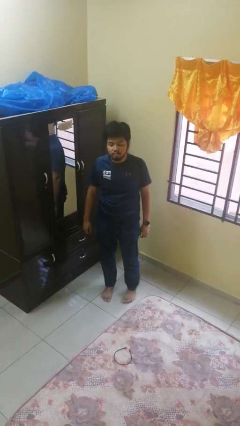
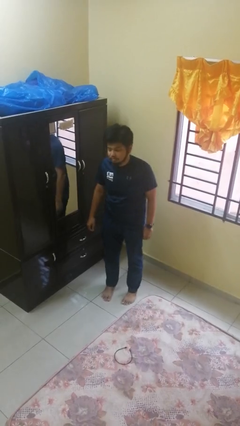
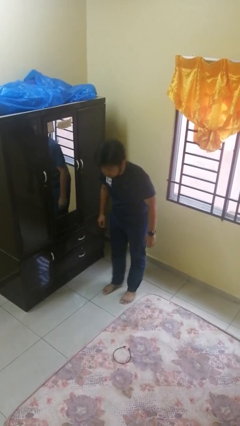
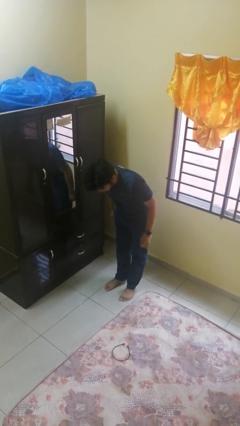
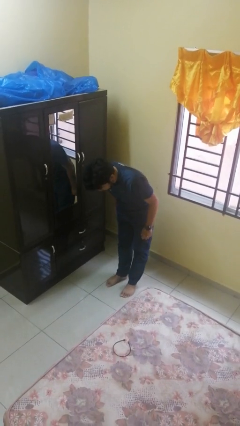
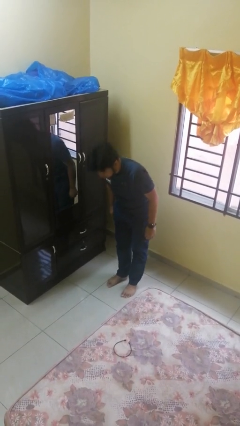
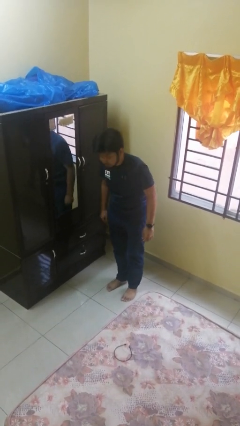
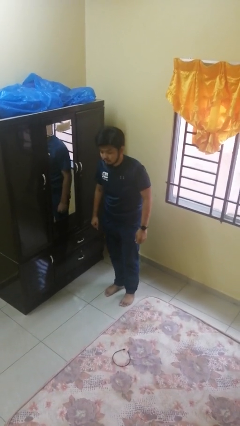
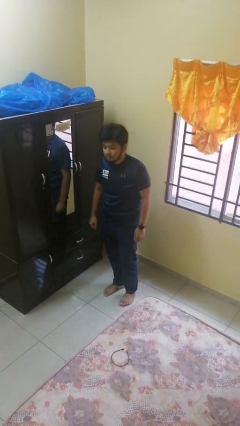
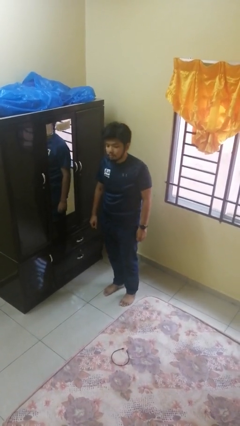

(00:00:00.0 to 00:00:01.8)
person bows

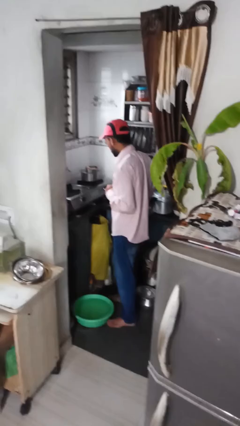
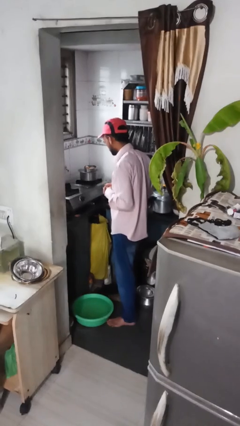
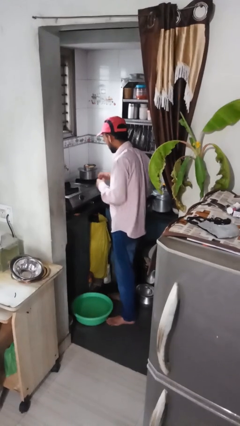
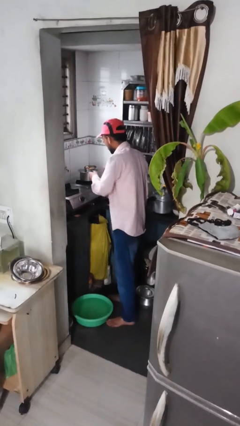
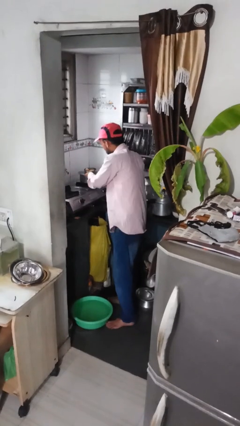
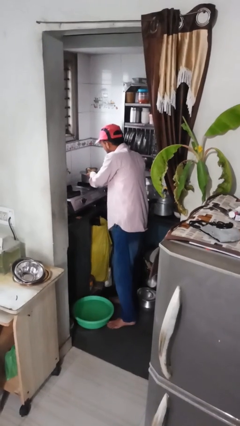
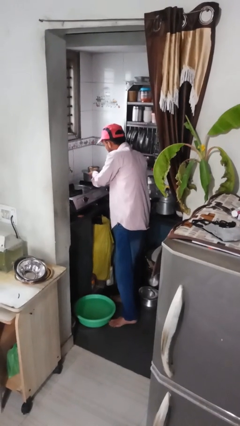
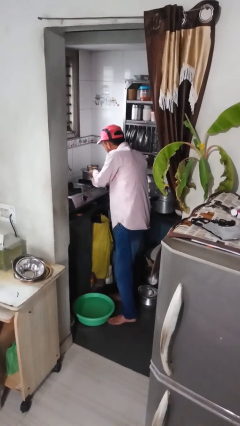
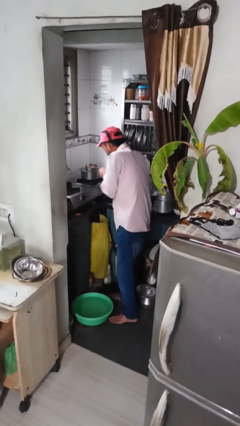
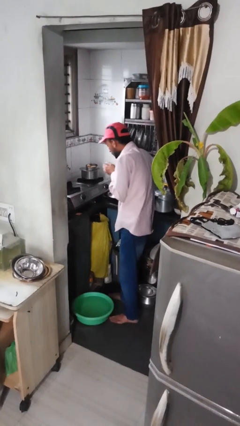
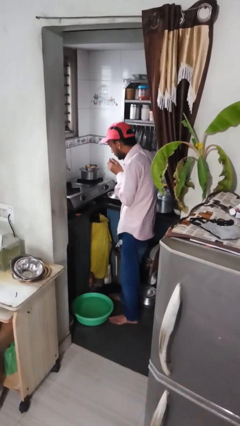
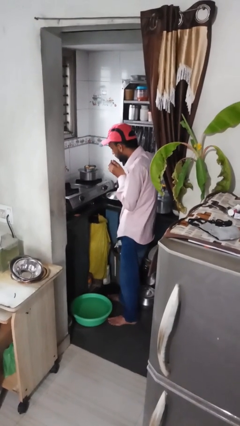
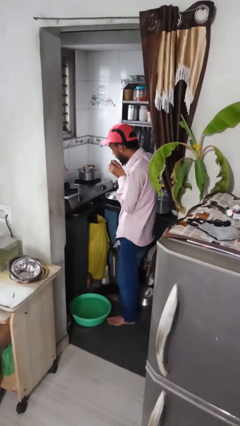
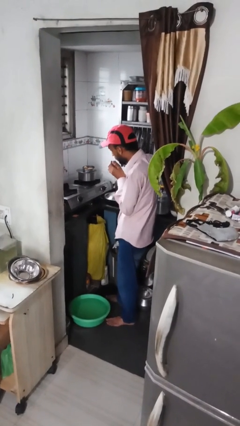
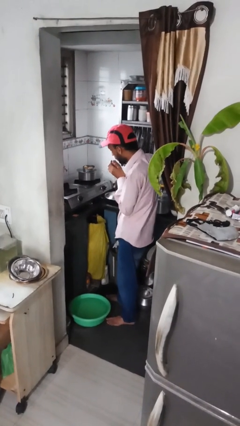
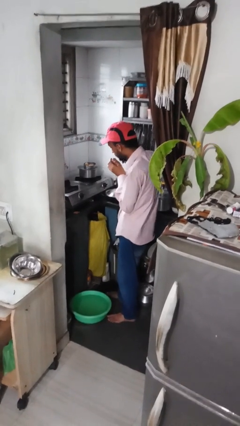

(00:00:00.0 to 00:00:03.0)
person burns hand

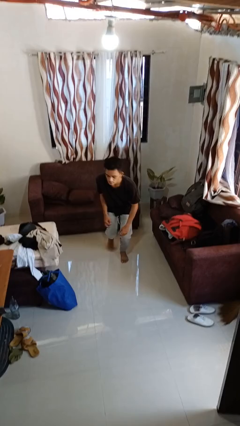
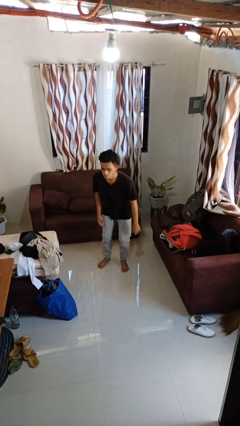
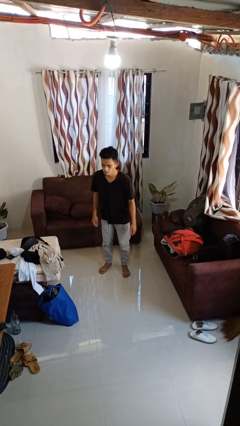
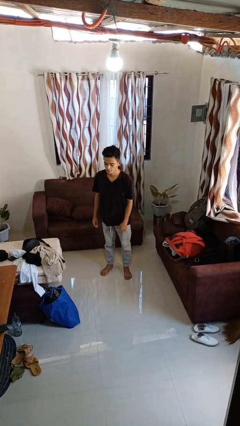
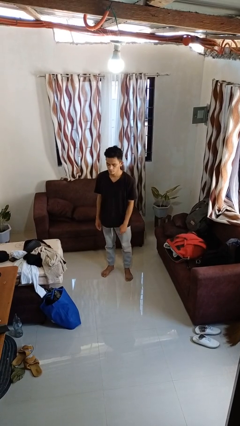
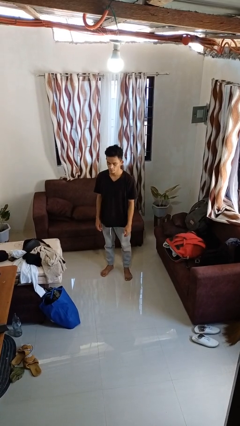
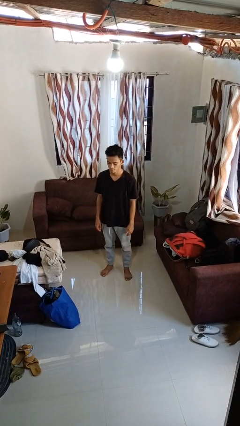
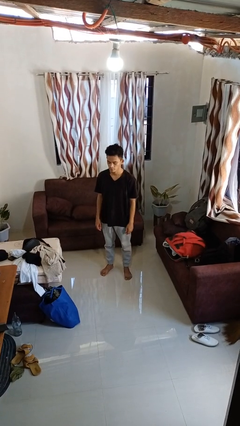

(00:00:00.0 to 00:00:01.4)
person stands up from floor

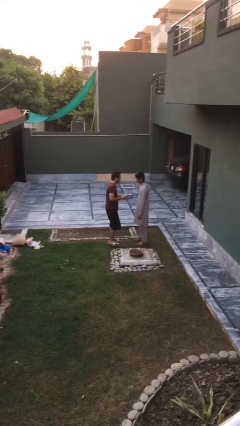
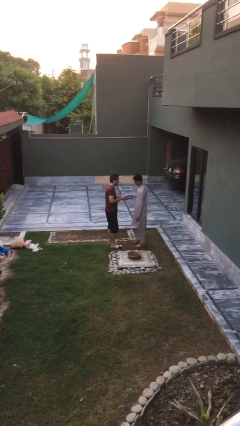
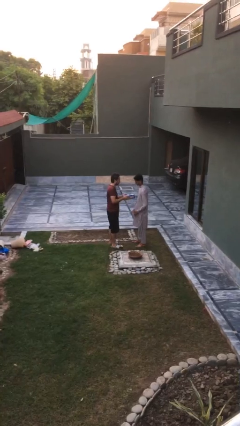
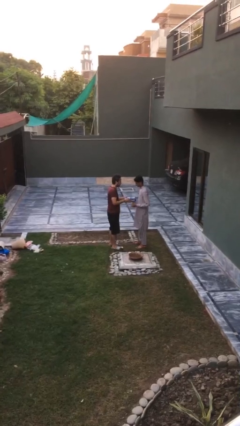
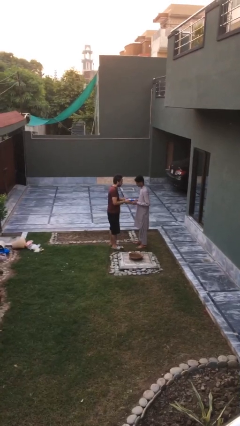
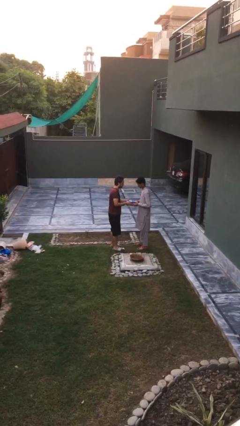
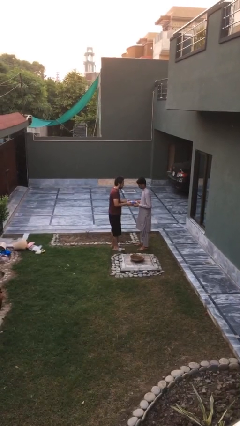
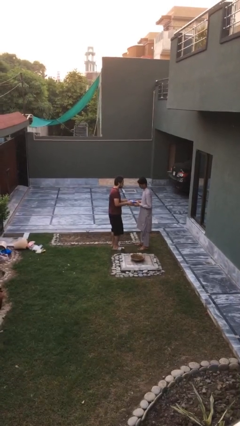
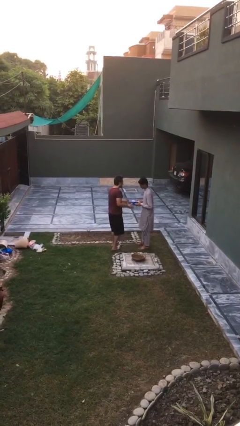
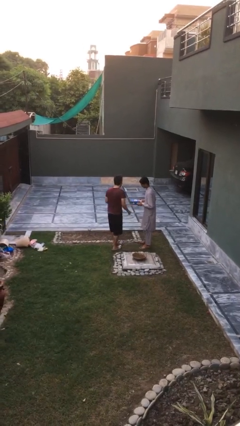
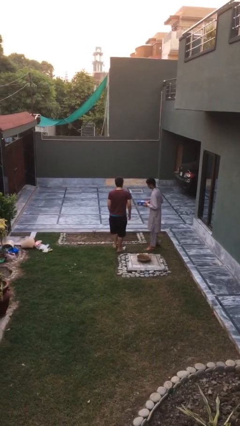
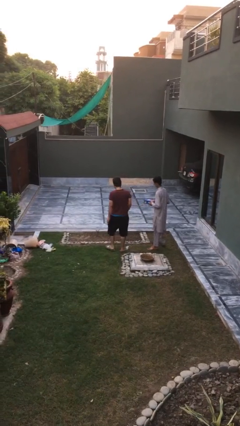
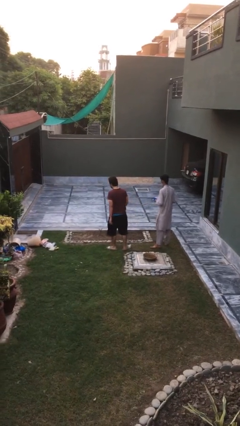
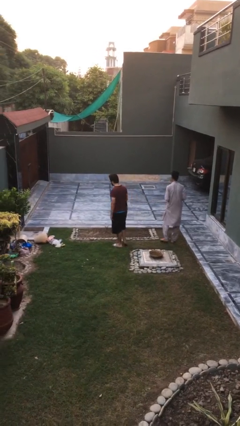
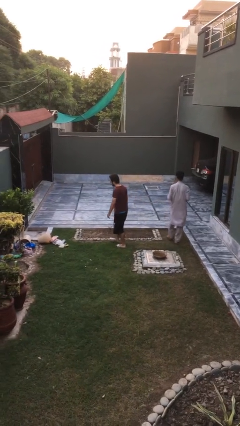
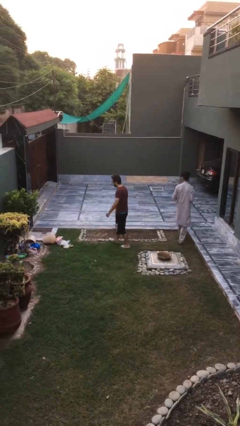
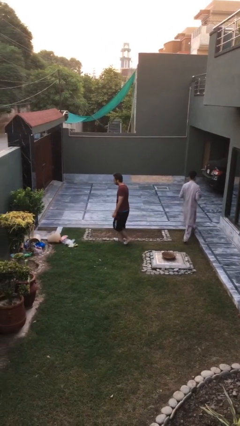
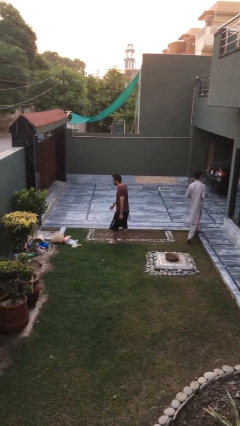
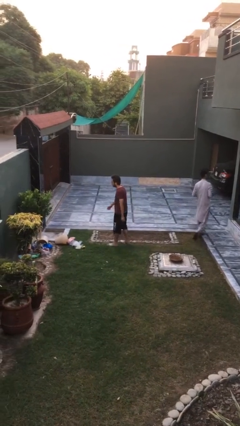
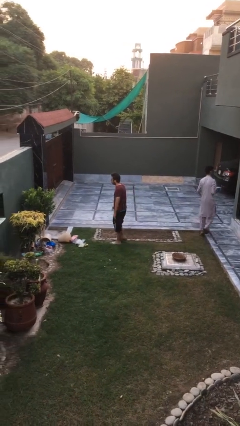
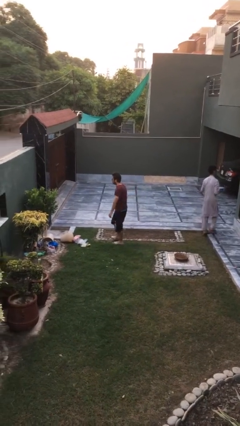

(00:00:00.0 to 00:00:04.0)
person transfers object to person

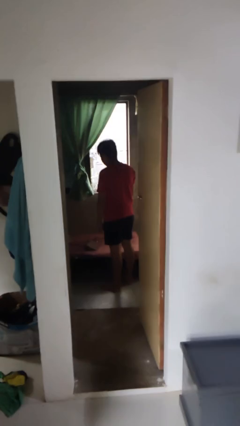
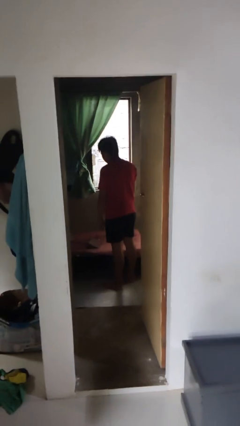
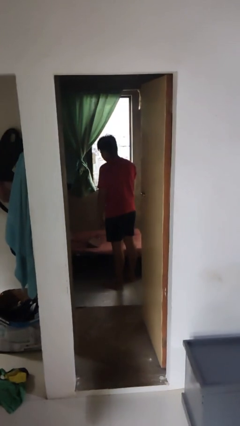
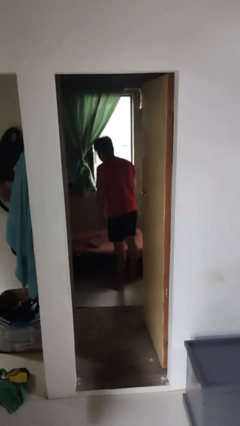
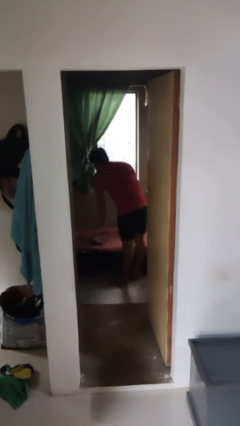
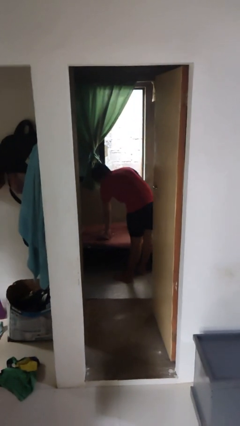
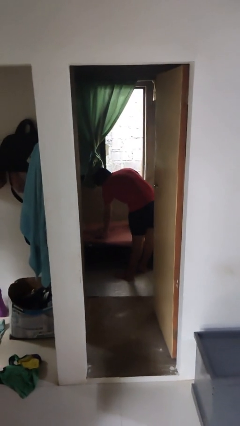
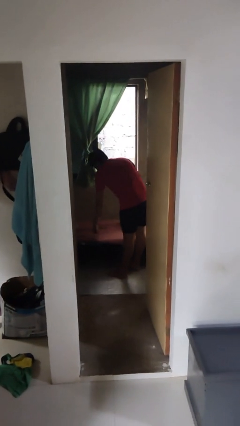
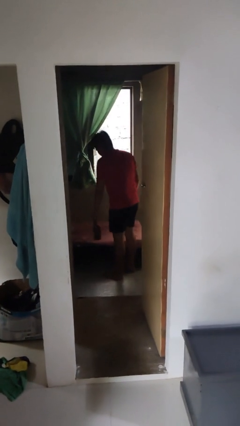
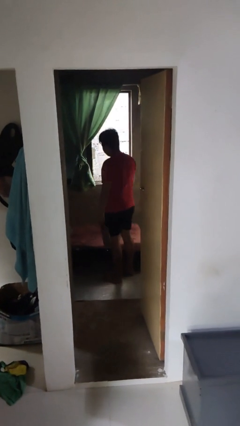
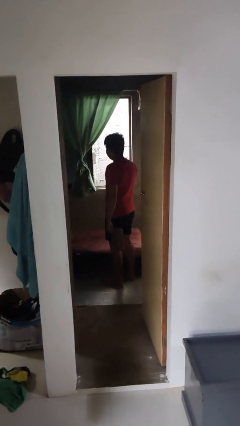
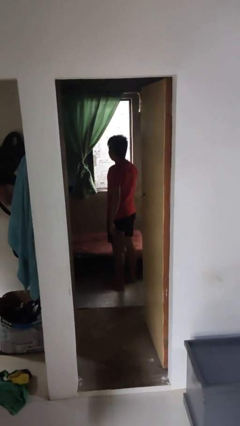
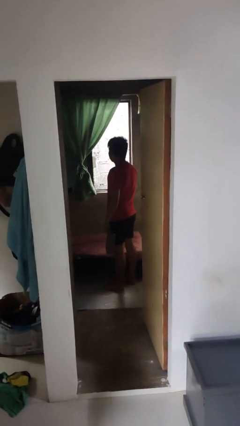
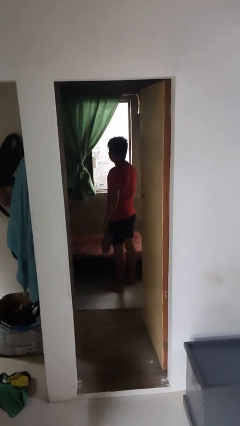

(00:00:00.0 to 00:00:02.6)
person picks up object from bed

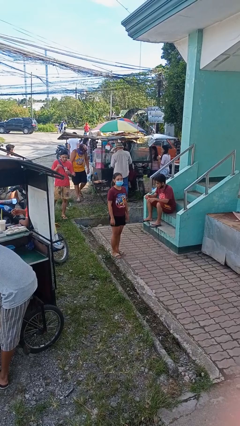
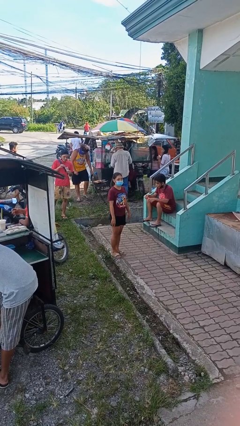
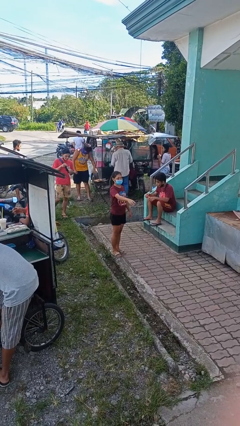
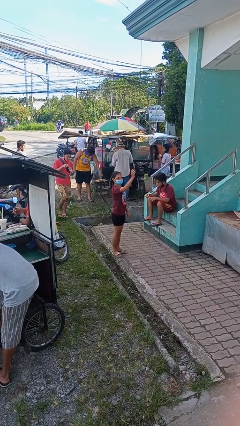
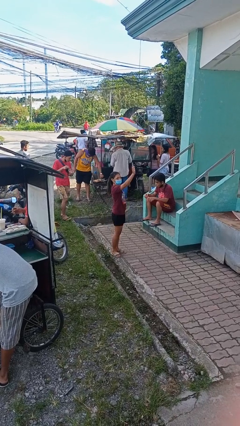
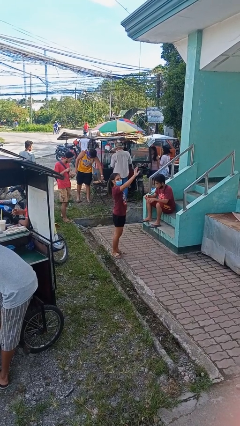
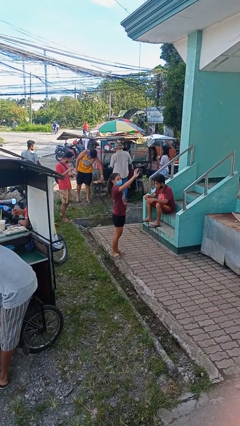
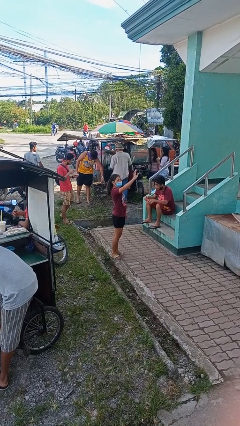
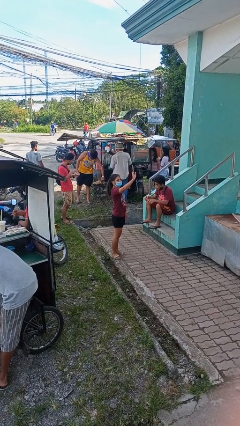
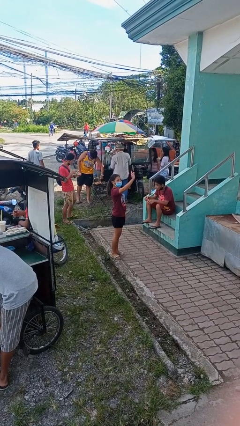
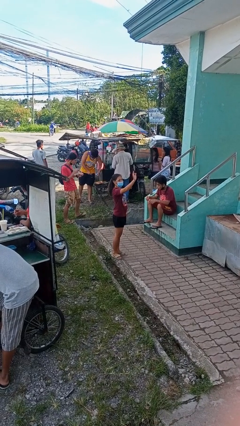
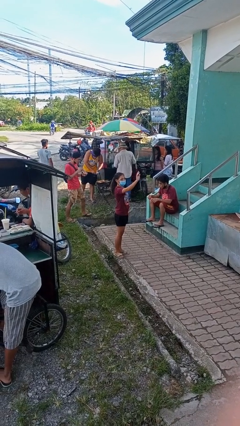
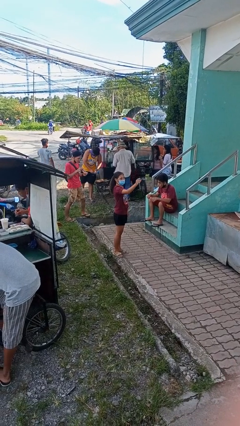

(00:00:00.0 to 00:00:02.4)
person waves at person

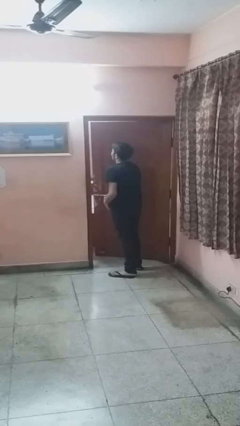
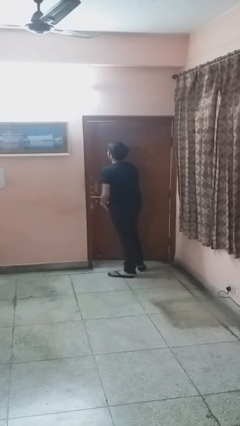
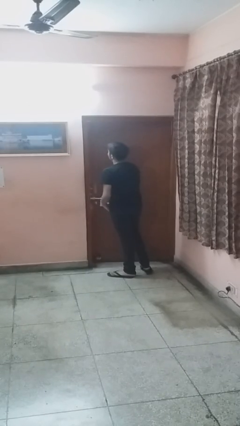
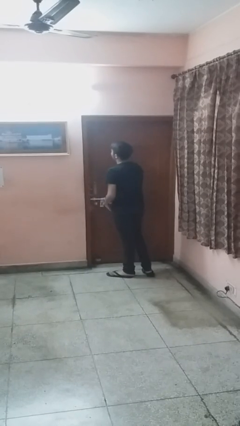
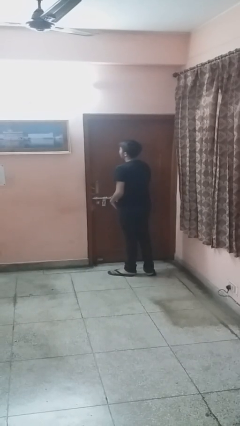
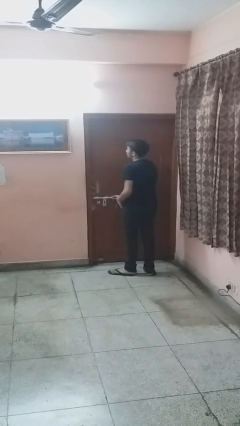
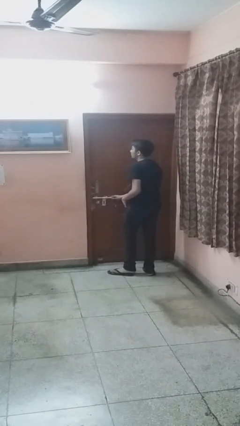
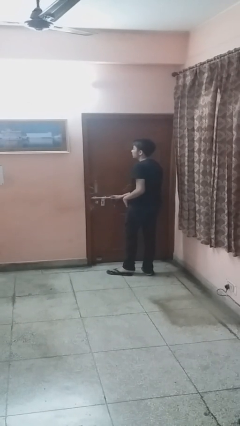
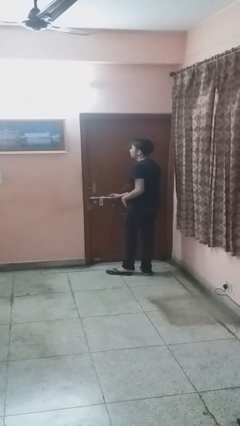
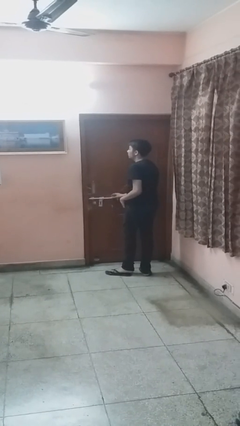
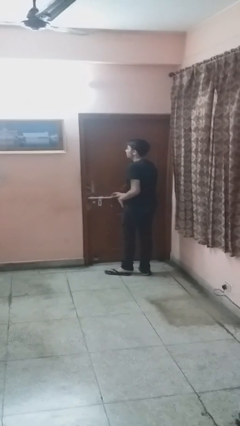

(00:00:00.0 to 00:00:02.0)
person closes facility door

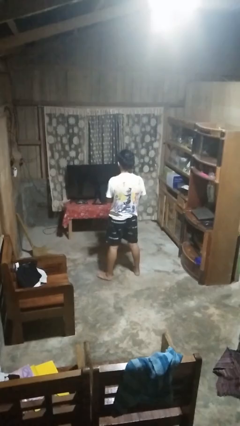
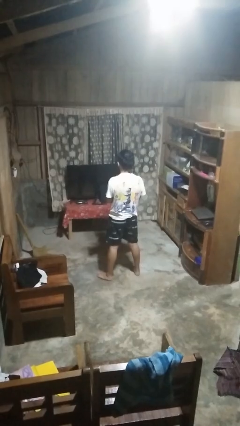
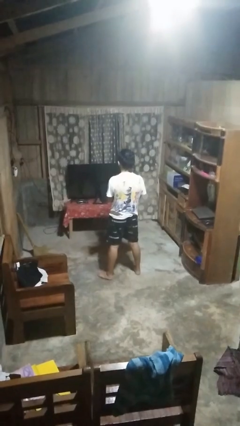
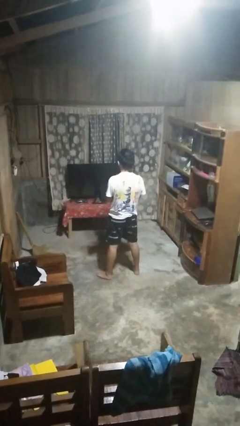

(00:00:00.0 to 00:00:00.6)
person punches
